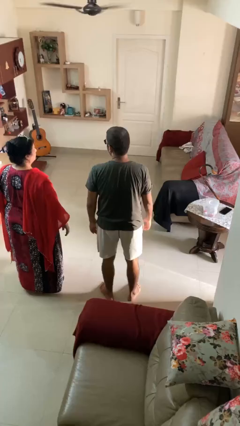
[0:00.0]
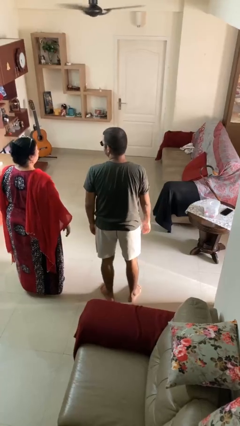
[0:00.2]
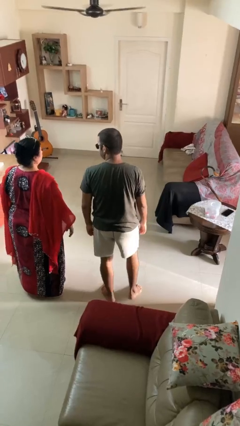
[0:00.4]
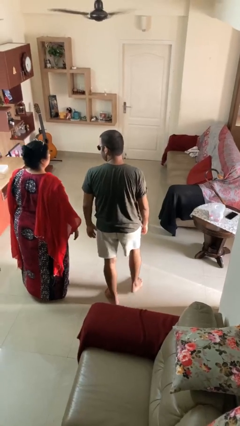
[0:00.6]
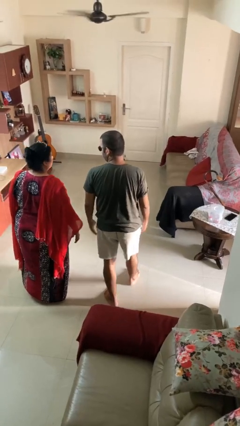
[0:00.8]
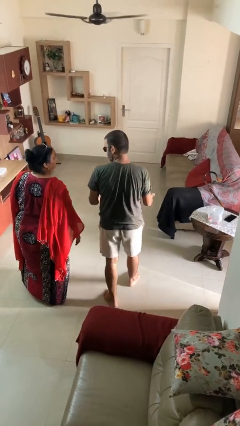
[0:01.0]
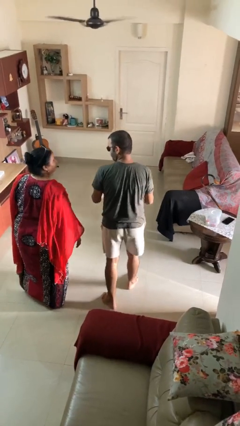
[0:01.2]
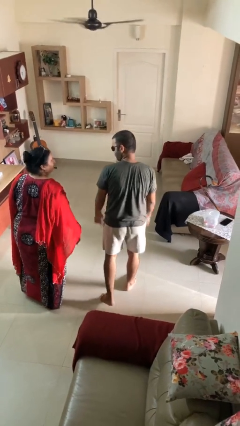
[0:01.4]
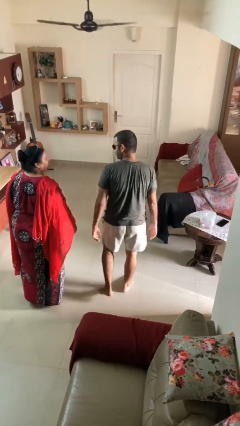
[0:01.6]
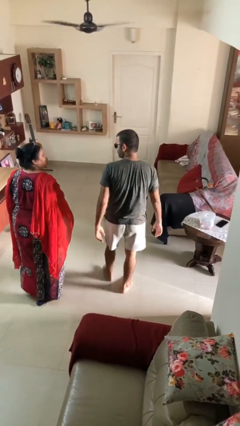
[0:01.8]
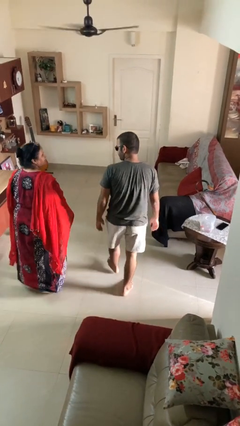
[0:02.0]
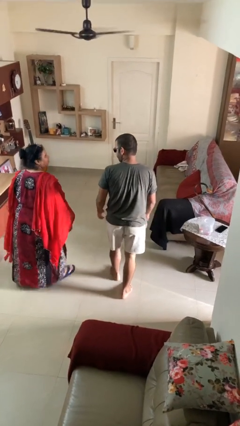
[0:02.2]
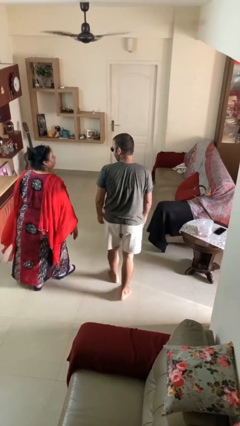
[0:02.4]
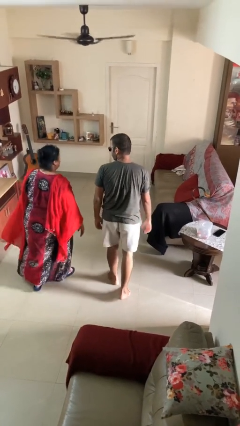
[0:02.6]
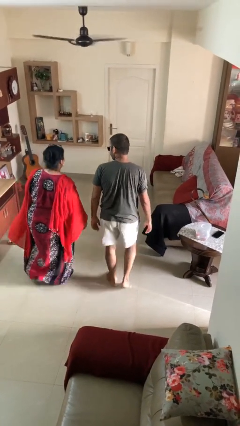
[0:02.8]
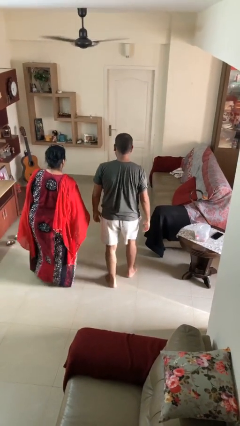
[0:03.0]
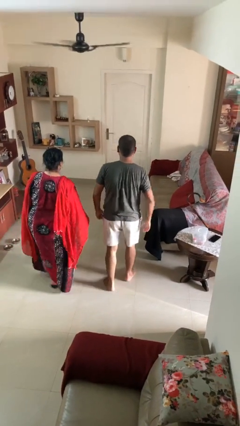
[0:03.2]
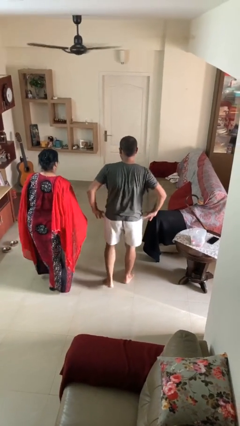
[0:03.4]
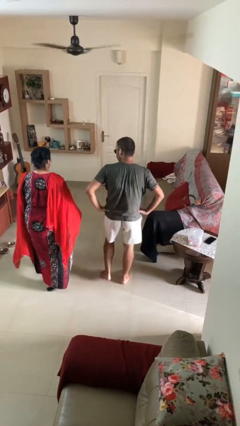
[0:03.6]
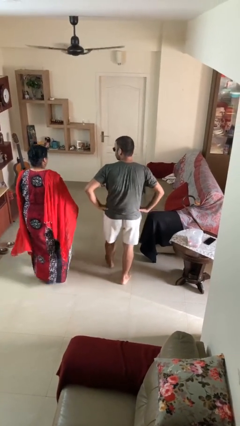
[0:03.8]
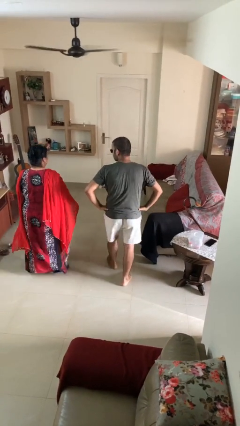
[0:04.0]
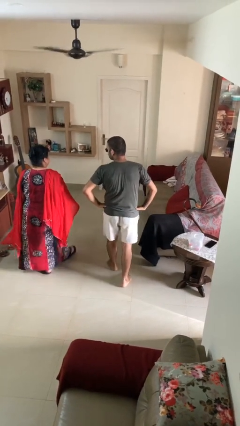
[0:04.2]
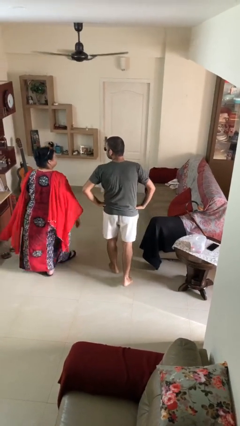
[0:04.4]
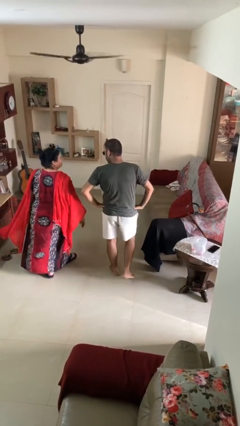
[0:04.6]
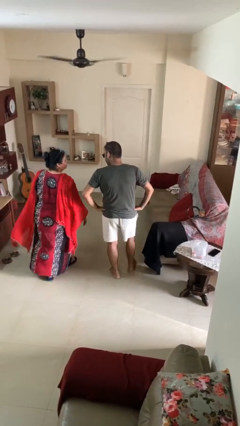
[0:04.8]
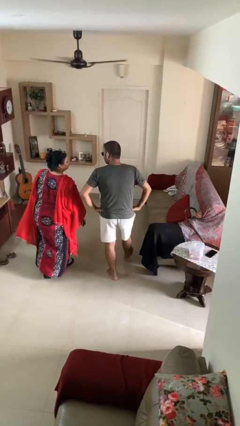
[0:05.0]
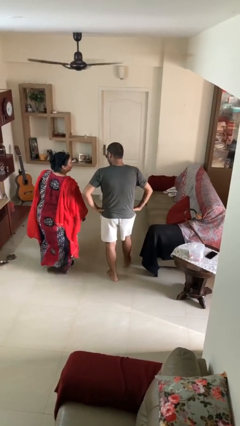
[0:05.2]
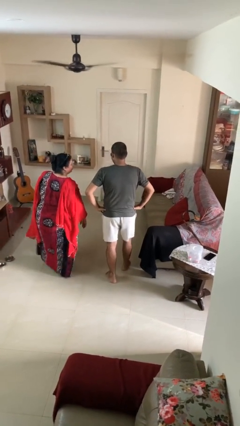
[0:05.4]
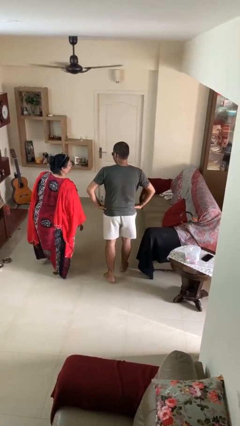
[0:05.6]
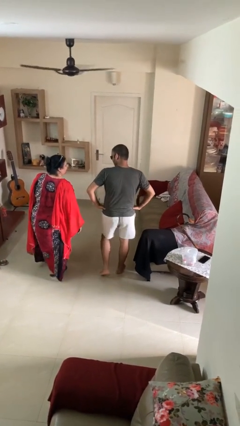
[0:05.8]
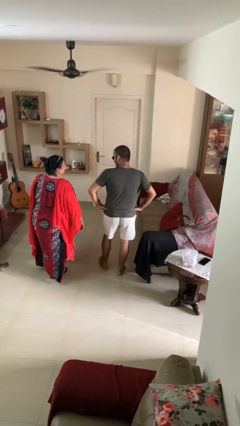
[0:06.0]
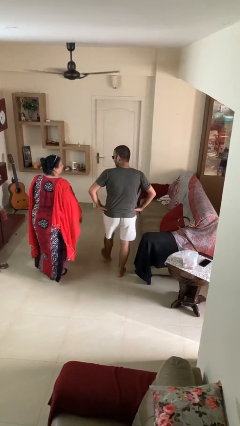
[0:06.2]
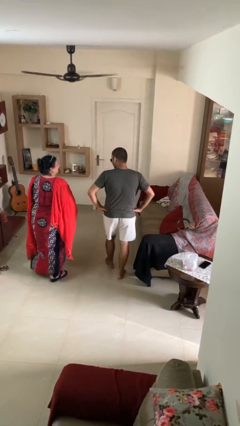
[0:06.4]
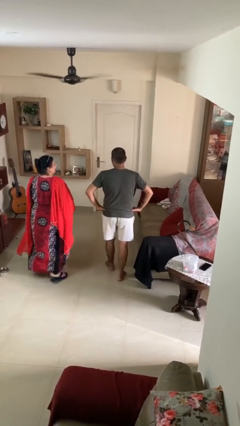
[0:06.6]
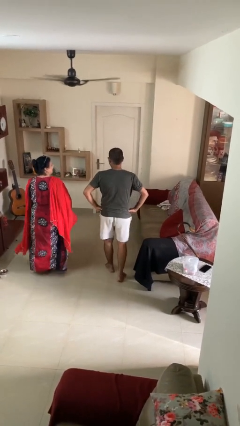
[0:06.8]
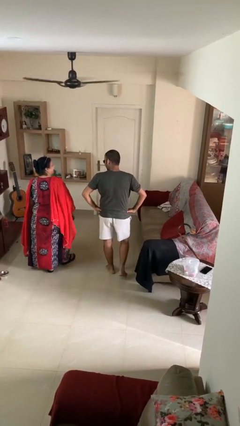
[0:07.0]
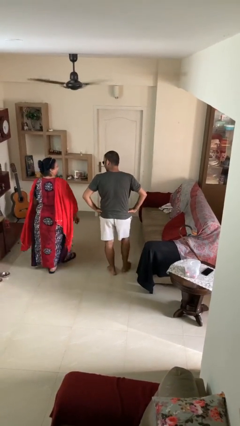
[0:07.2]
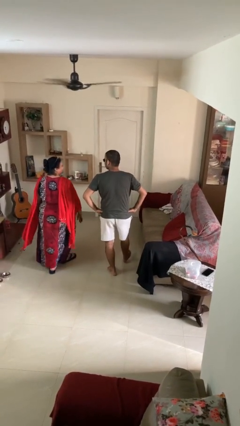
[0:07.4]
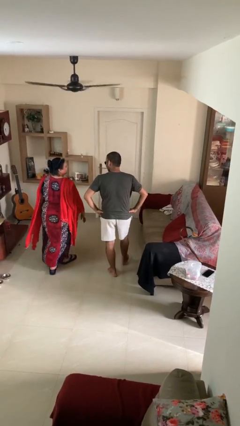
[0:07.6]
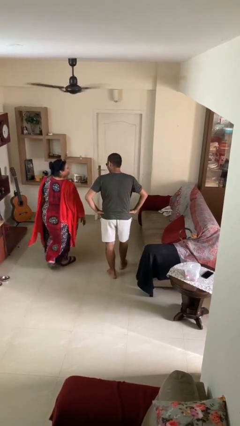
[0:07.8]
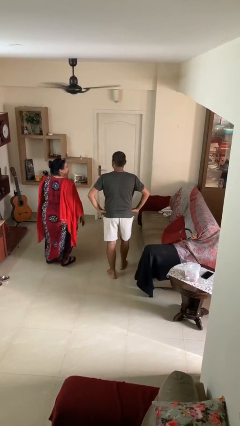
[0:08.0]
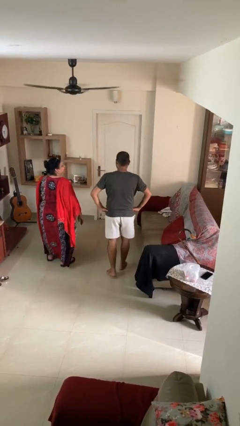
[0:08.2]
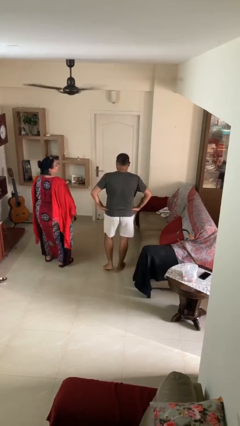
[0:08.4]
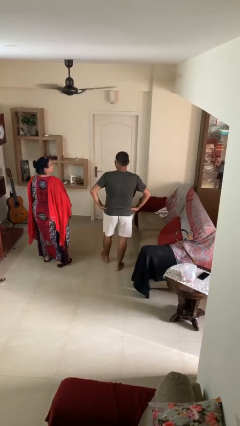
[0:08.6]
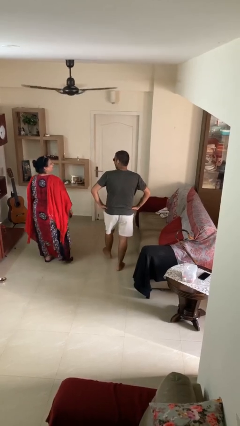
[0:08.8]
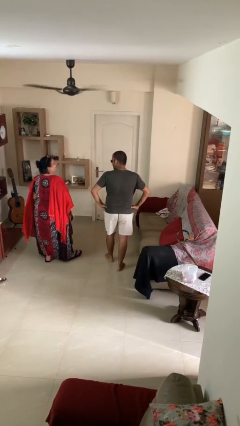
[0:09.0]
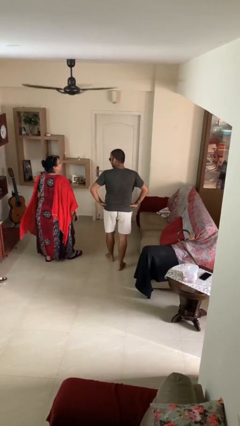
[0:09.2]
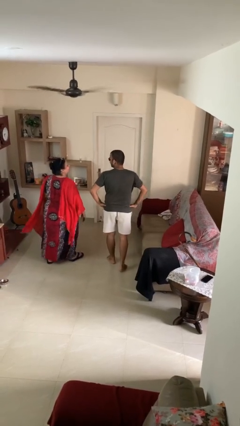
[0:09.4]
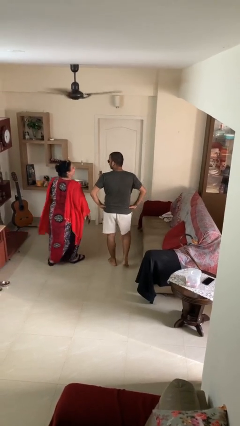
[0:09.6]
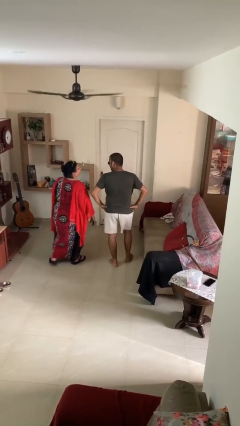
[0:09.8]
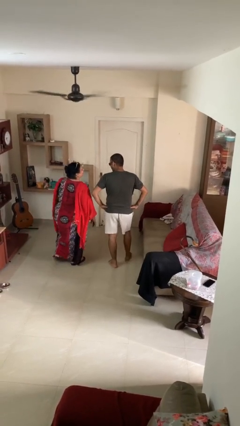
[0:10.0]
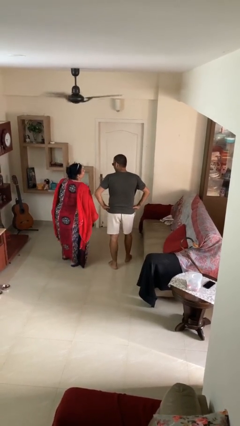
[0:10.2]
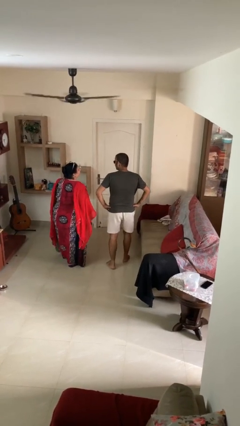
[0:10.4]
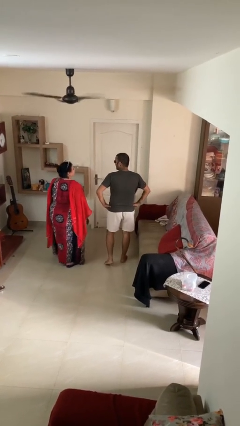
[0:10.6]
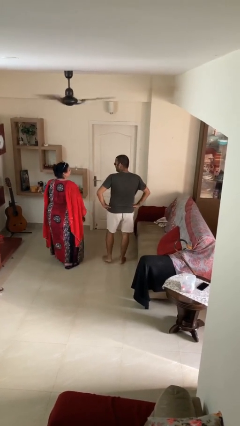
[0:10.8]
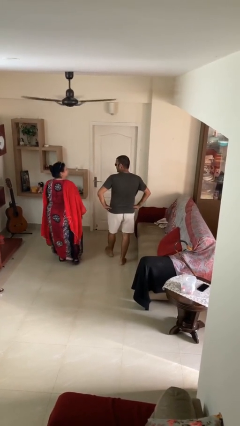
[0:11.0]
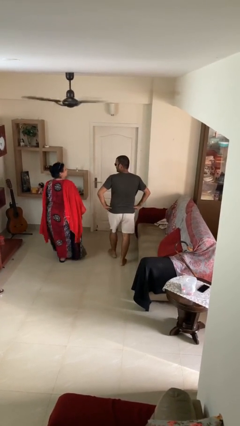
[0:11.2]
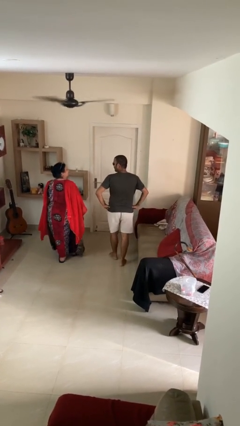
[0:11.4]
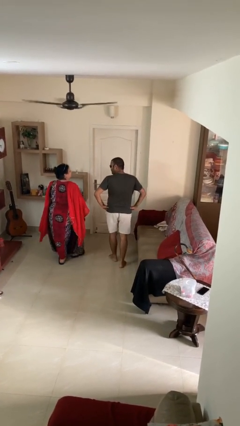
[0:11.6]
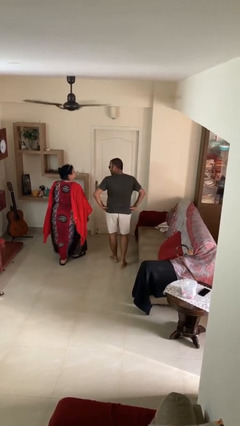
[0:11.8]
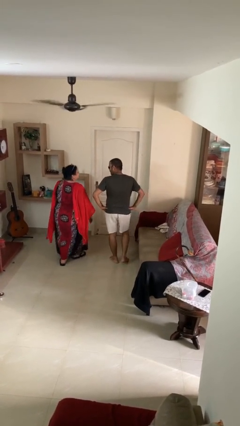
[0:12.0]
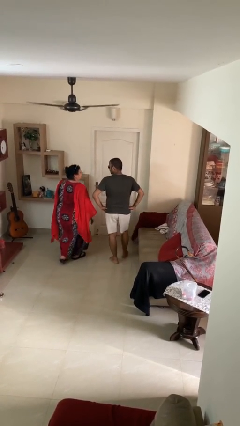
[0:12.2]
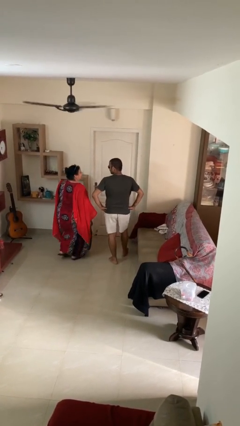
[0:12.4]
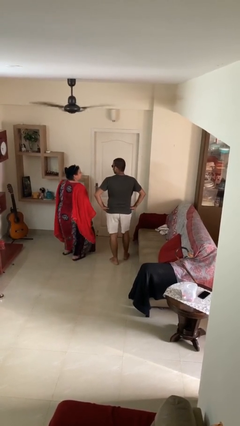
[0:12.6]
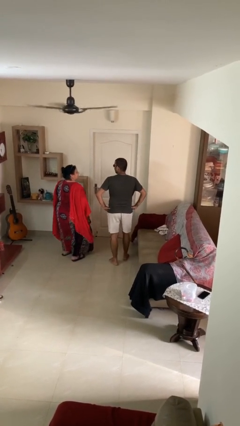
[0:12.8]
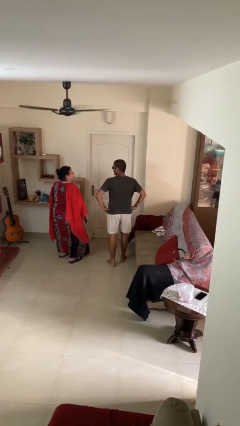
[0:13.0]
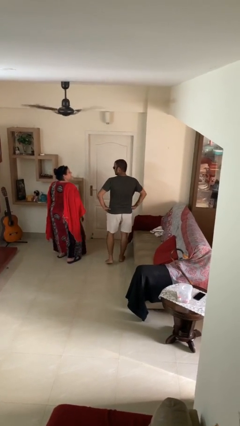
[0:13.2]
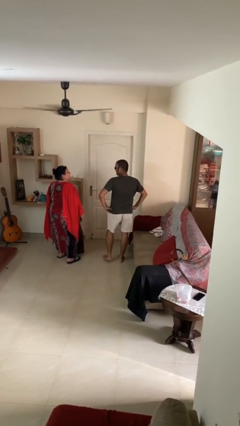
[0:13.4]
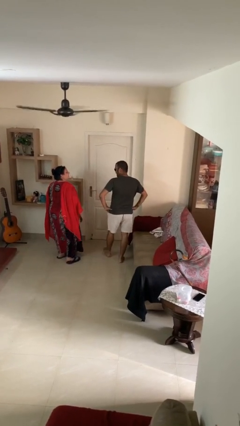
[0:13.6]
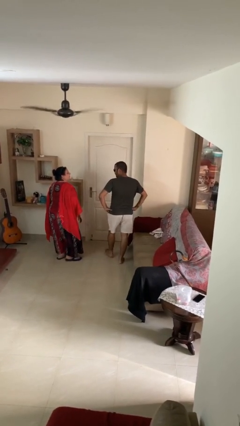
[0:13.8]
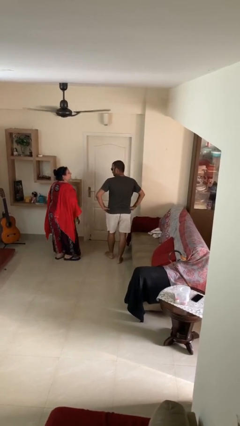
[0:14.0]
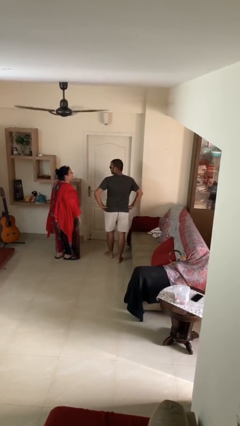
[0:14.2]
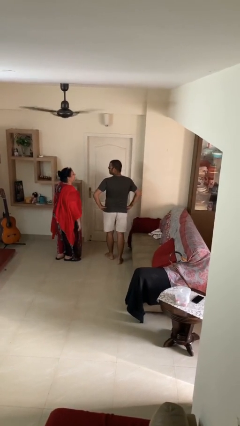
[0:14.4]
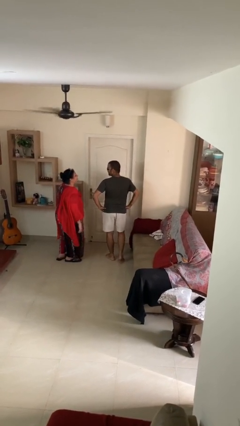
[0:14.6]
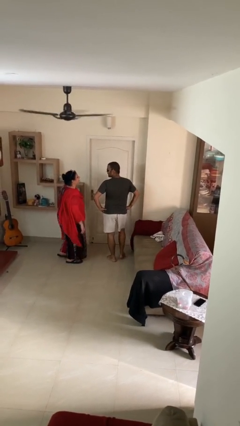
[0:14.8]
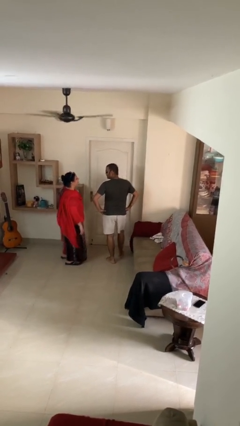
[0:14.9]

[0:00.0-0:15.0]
person talks to person

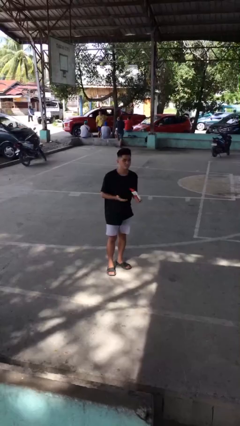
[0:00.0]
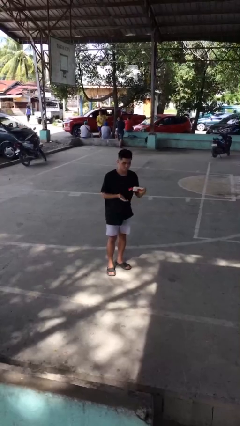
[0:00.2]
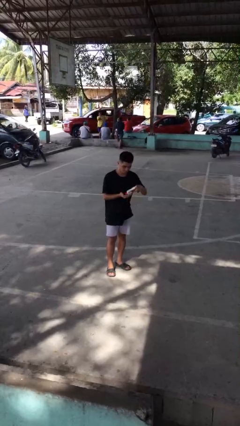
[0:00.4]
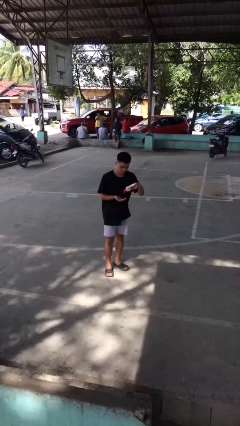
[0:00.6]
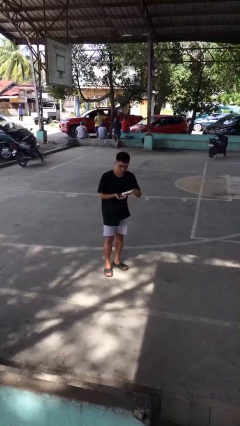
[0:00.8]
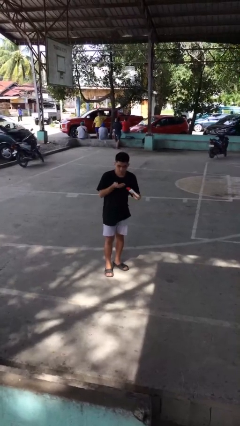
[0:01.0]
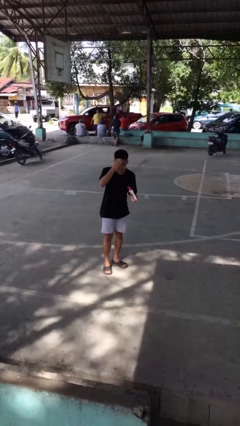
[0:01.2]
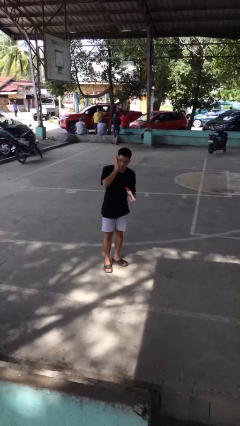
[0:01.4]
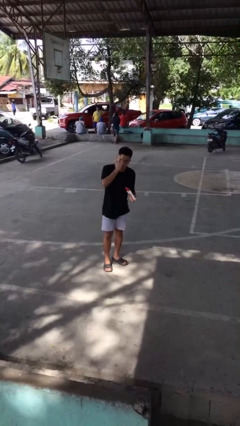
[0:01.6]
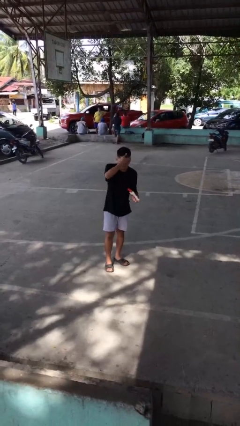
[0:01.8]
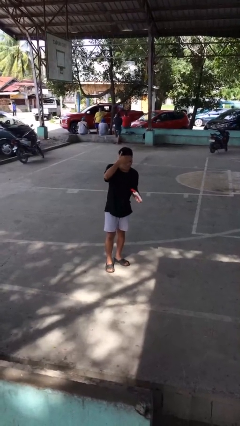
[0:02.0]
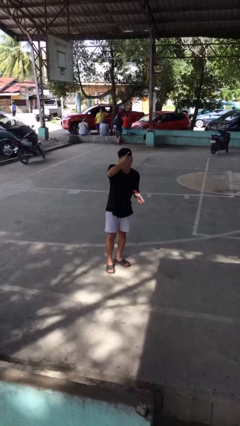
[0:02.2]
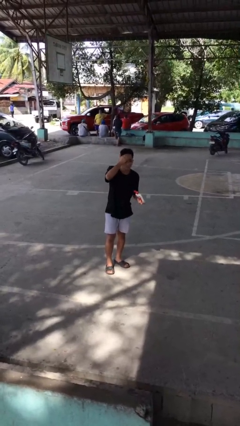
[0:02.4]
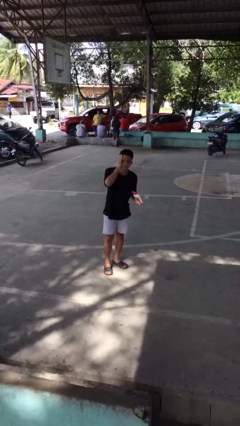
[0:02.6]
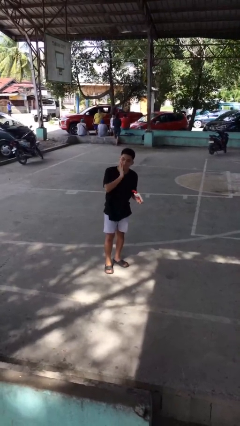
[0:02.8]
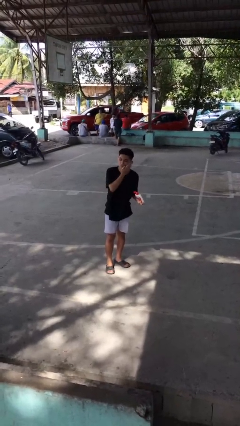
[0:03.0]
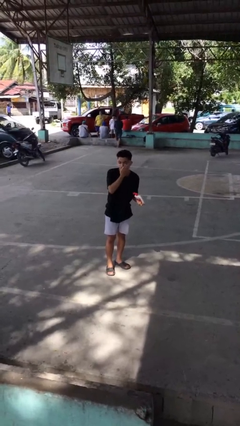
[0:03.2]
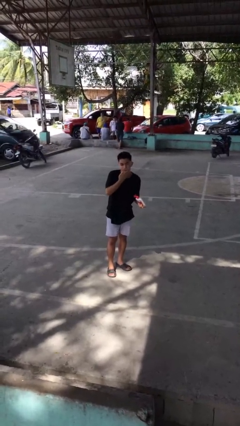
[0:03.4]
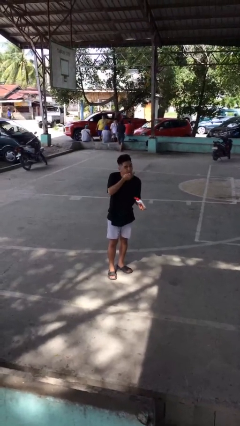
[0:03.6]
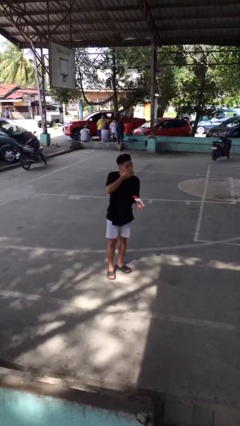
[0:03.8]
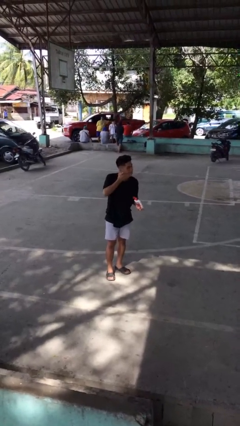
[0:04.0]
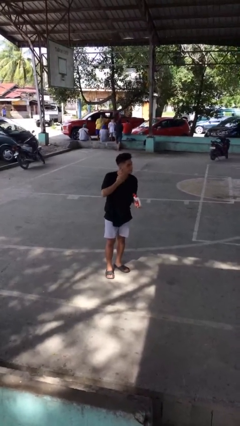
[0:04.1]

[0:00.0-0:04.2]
person applies facial moisturizer
